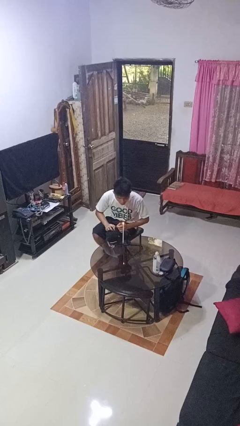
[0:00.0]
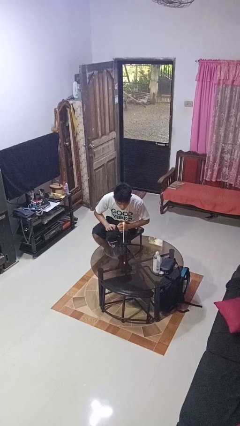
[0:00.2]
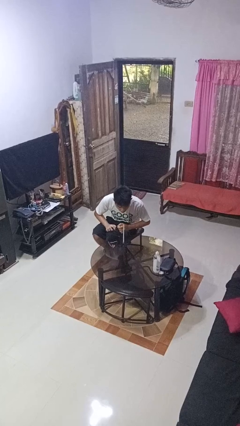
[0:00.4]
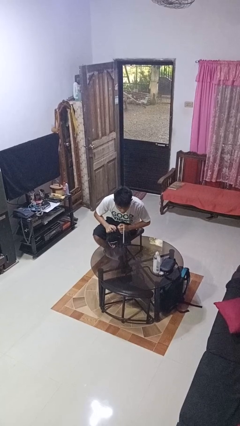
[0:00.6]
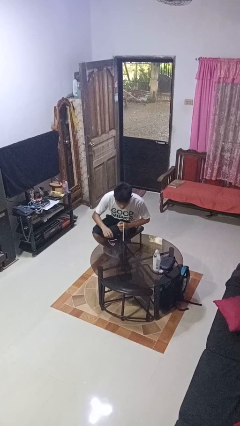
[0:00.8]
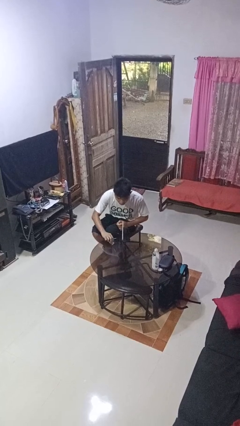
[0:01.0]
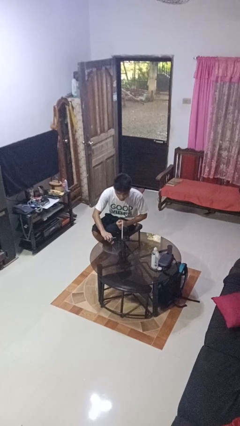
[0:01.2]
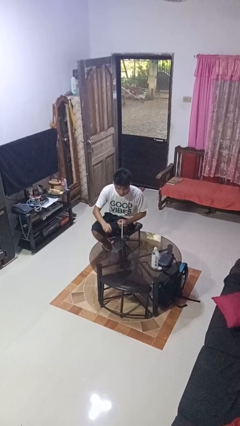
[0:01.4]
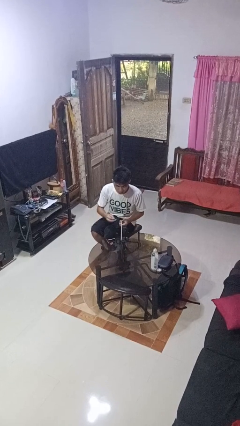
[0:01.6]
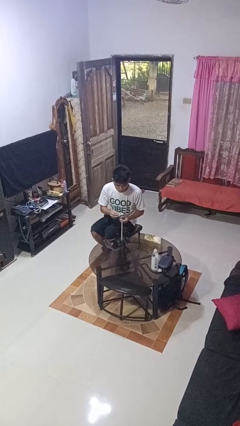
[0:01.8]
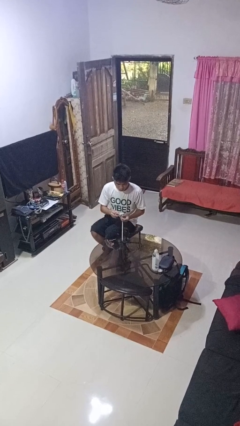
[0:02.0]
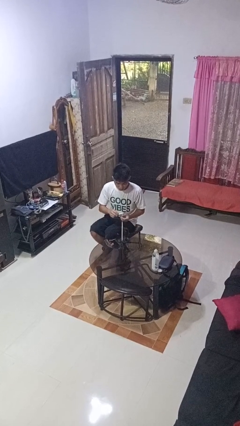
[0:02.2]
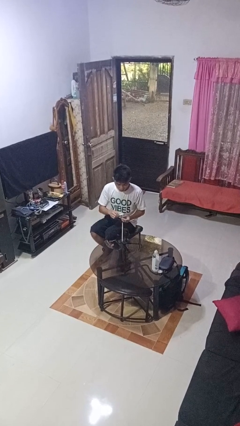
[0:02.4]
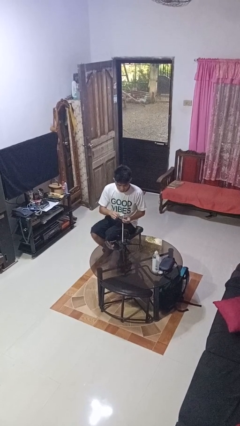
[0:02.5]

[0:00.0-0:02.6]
person extinguishes candle

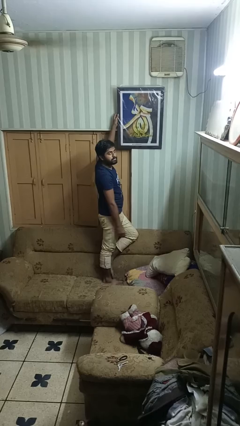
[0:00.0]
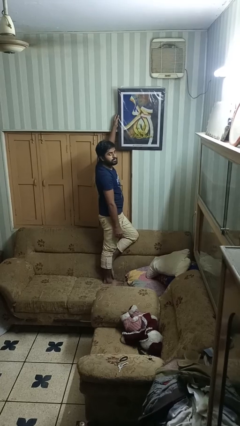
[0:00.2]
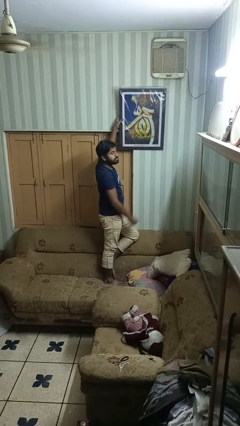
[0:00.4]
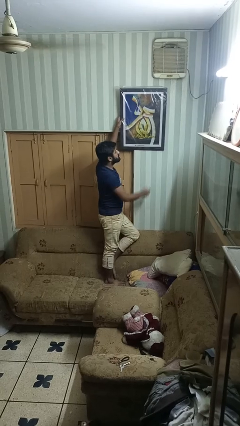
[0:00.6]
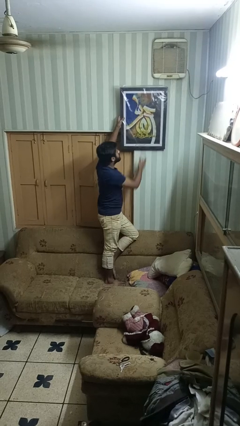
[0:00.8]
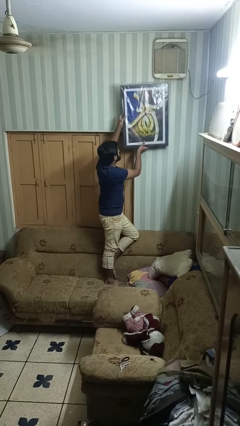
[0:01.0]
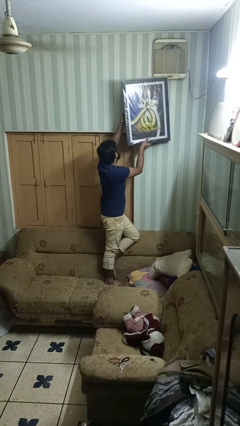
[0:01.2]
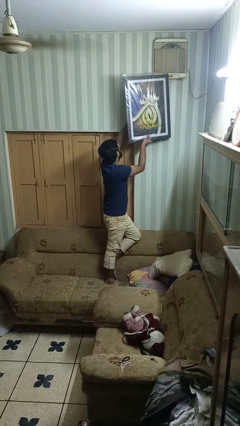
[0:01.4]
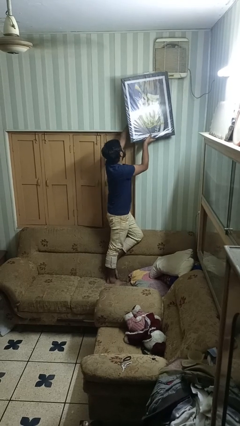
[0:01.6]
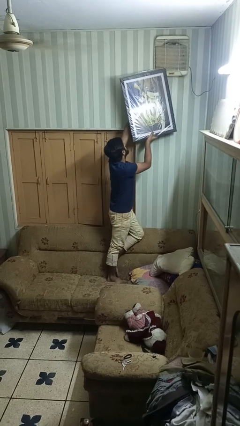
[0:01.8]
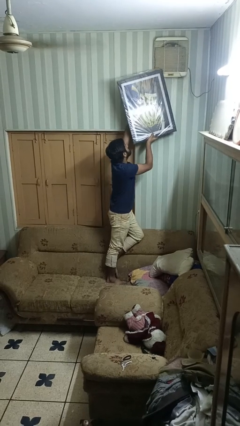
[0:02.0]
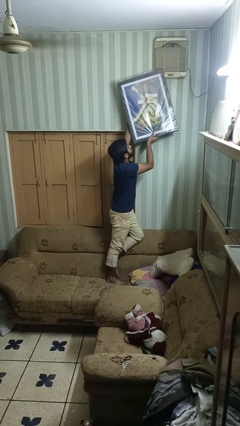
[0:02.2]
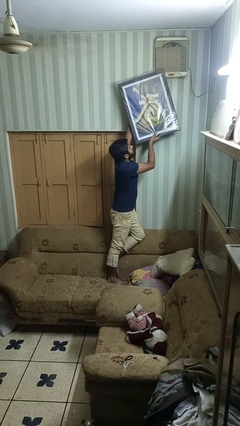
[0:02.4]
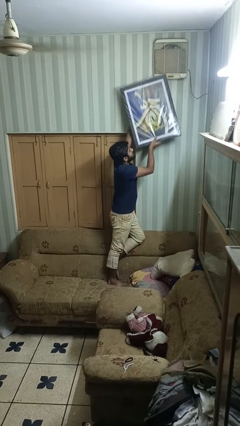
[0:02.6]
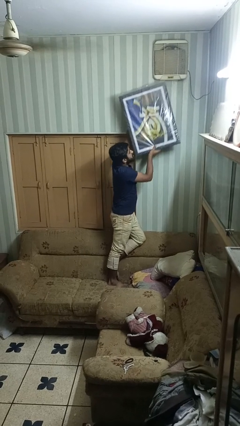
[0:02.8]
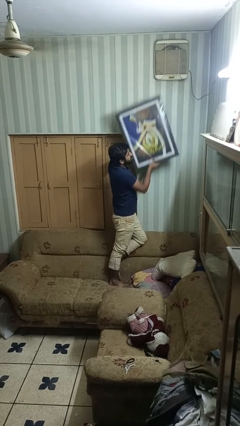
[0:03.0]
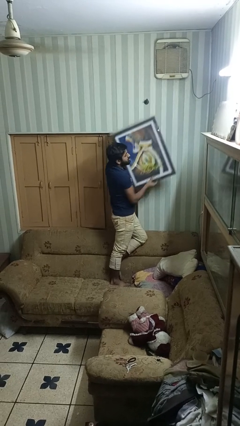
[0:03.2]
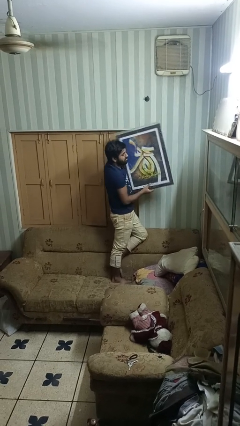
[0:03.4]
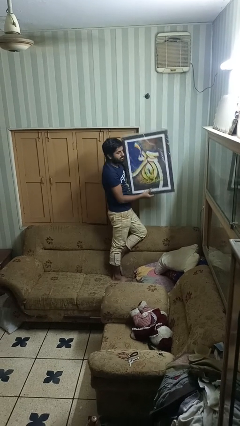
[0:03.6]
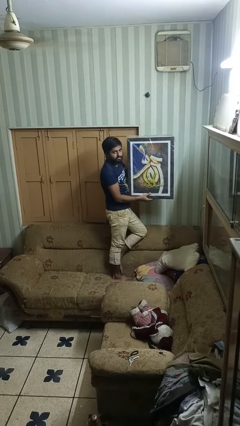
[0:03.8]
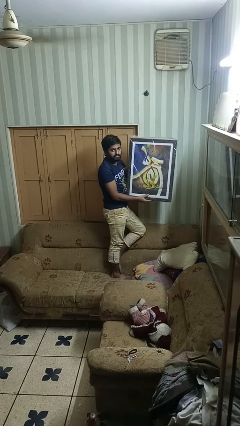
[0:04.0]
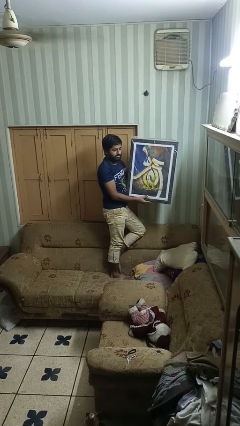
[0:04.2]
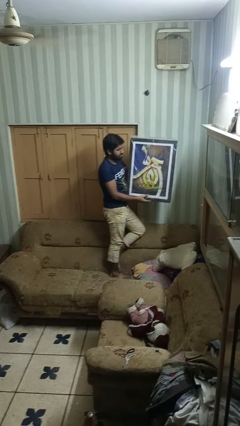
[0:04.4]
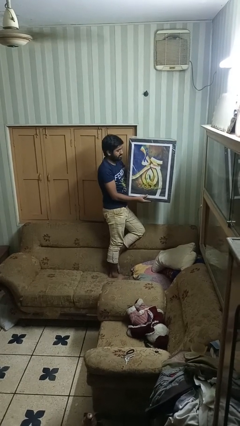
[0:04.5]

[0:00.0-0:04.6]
person takes down picture frame

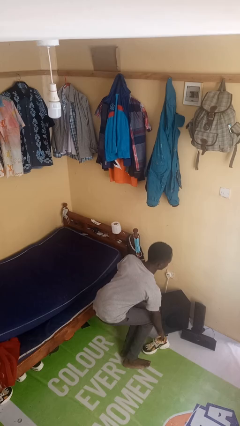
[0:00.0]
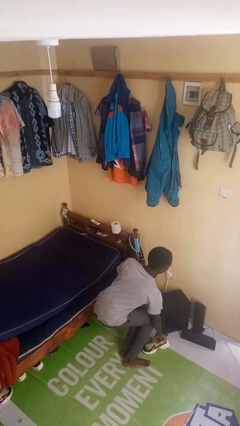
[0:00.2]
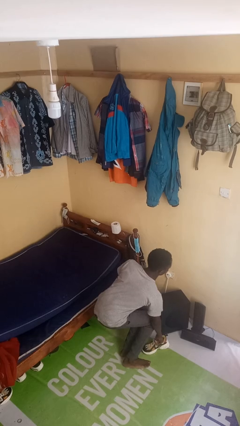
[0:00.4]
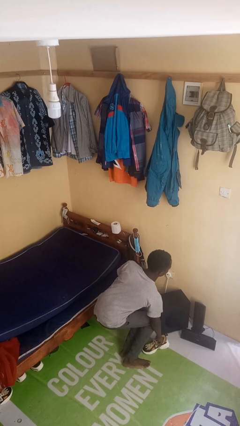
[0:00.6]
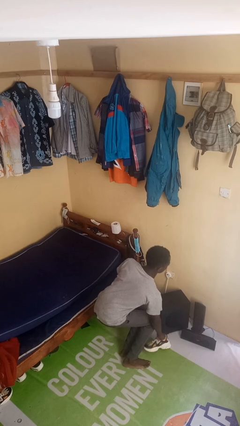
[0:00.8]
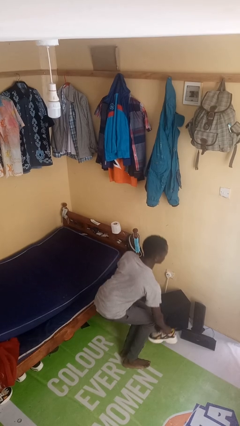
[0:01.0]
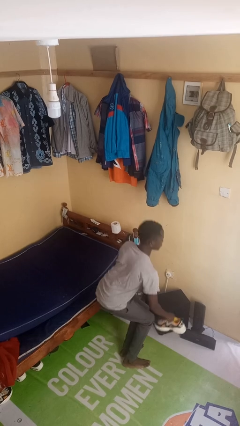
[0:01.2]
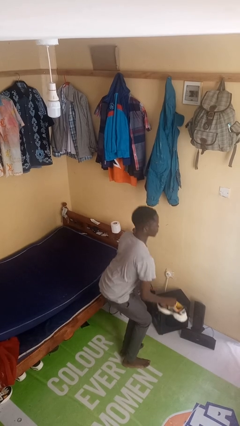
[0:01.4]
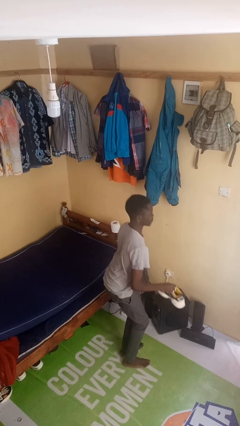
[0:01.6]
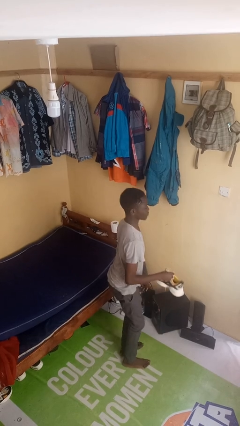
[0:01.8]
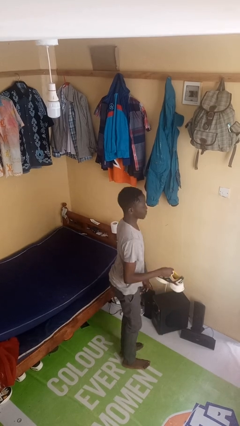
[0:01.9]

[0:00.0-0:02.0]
person picks up object from floor

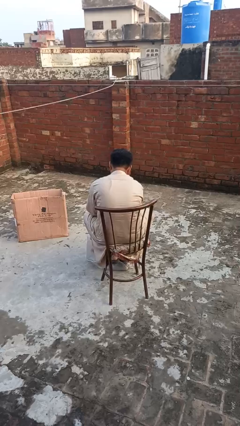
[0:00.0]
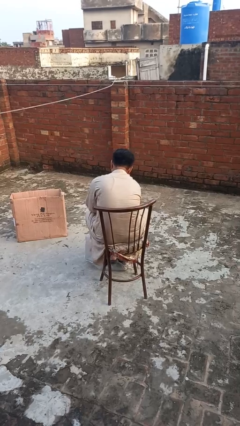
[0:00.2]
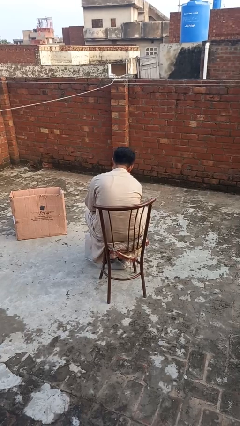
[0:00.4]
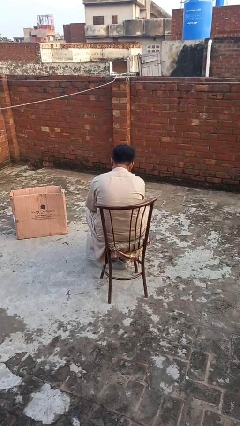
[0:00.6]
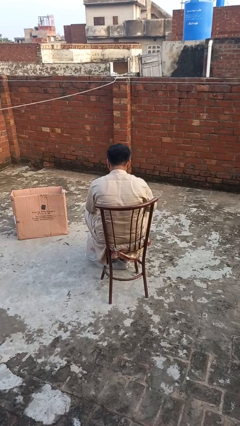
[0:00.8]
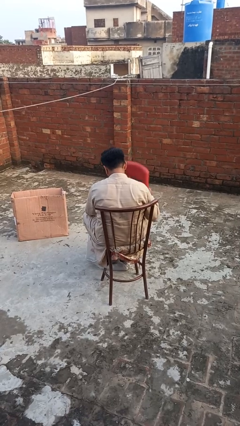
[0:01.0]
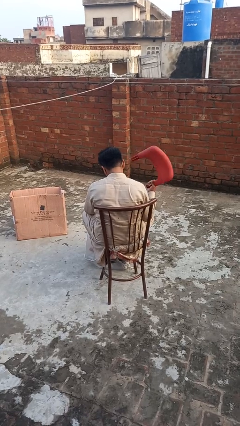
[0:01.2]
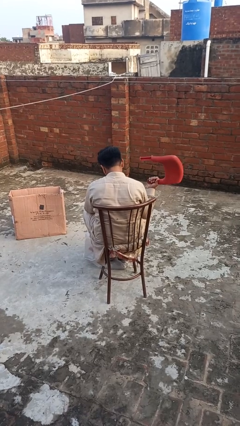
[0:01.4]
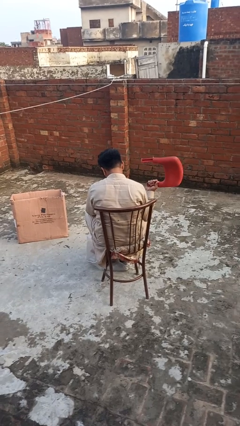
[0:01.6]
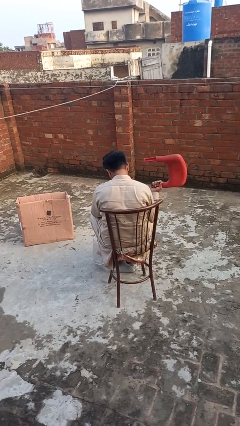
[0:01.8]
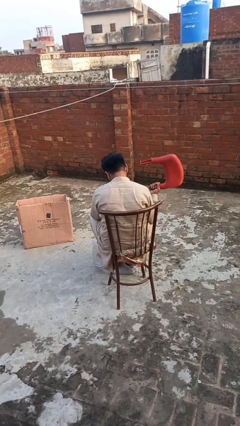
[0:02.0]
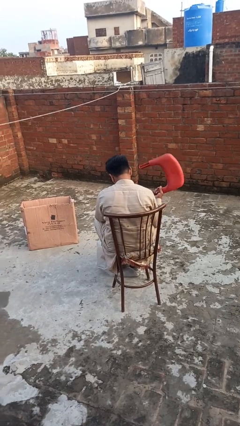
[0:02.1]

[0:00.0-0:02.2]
person searches in bag

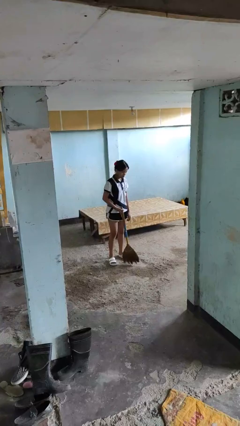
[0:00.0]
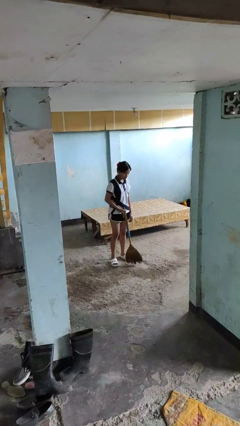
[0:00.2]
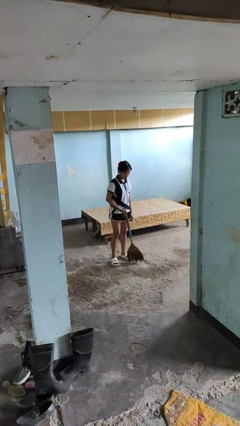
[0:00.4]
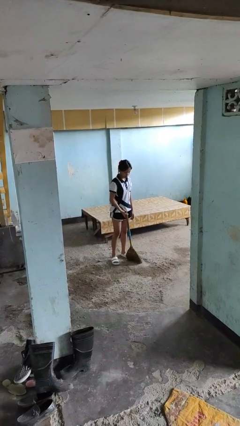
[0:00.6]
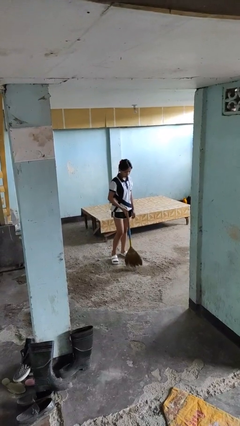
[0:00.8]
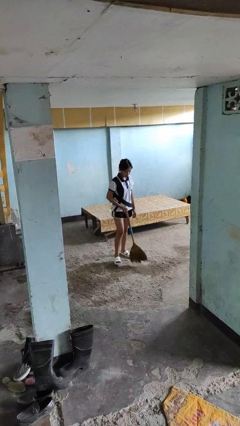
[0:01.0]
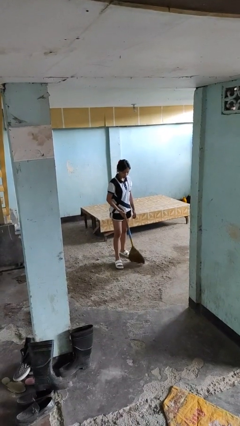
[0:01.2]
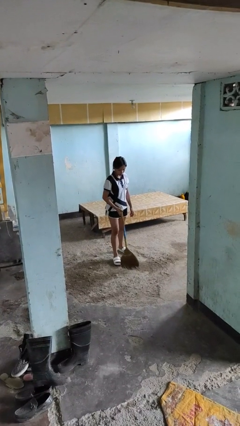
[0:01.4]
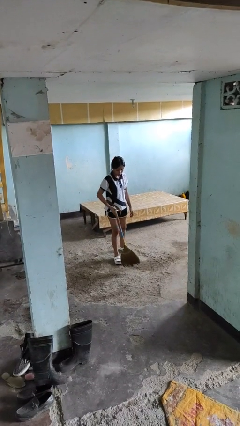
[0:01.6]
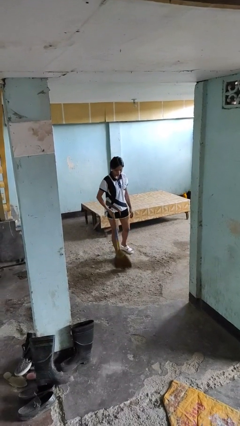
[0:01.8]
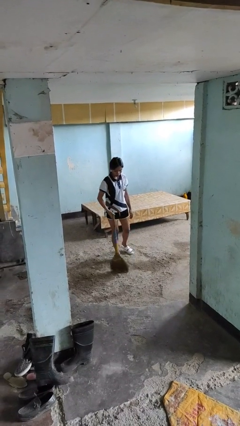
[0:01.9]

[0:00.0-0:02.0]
person sweeps floor

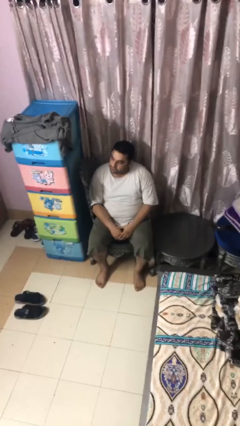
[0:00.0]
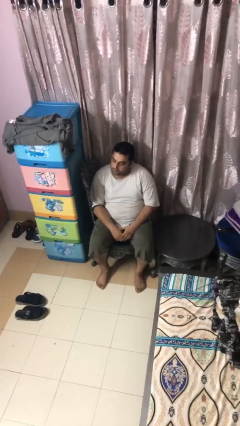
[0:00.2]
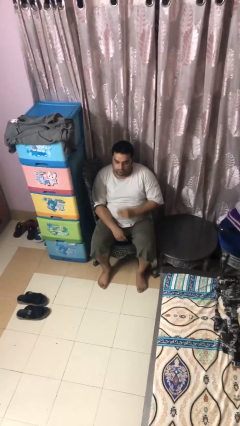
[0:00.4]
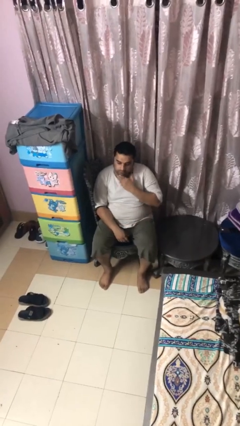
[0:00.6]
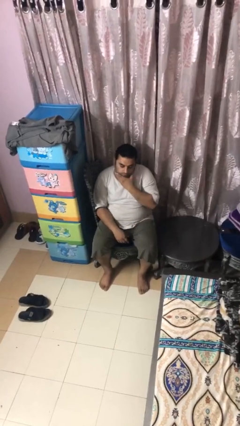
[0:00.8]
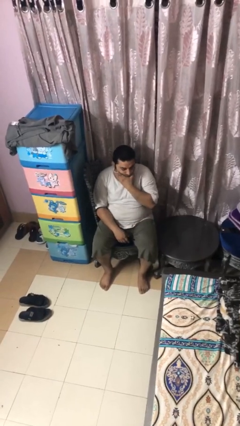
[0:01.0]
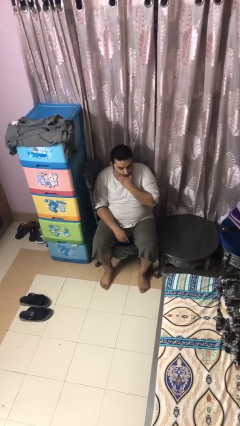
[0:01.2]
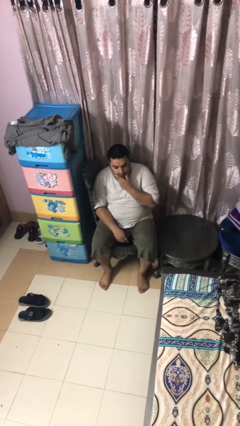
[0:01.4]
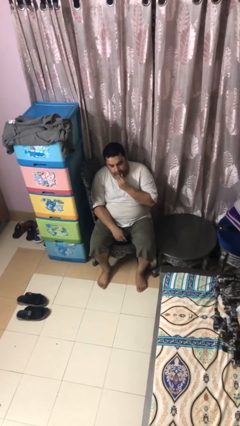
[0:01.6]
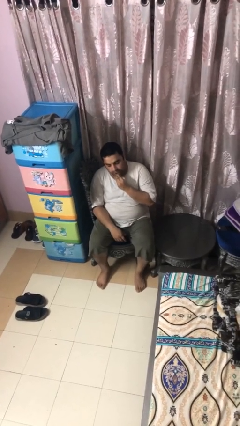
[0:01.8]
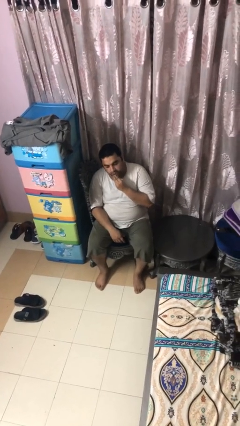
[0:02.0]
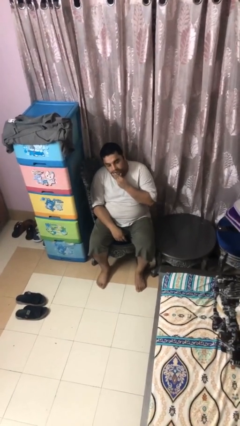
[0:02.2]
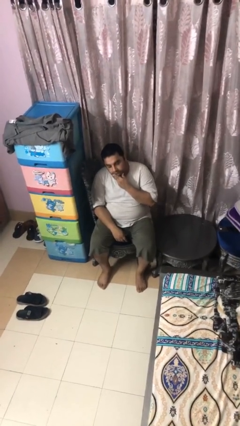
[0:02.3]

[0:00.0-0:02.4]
person strokes chin

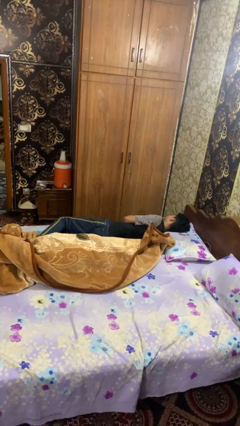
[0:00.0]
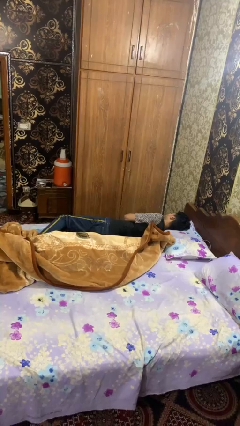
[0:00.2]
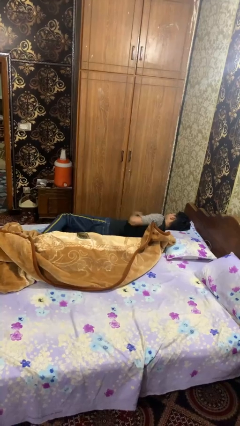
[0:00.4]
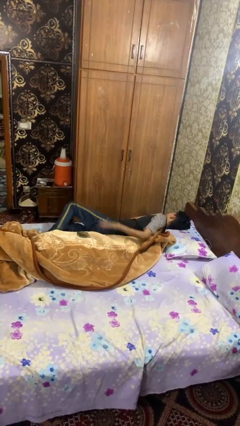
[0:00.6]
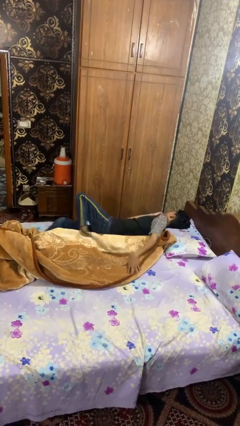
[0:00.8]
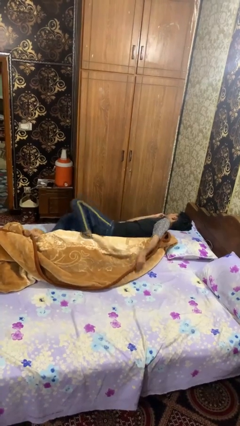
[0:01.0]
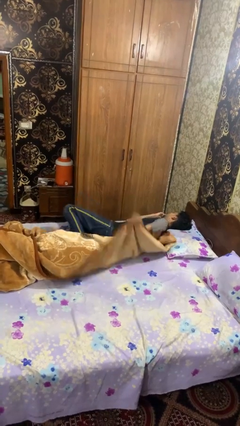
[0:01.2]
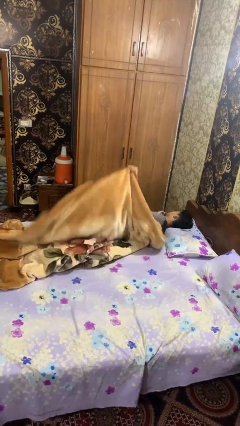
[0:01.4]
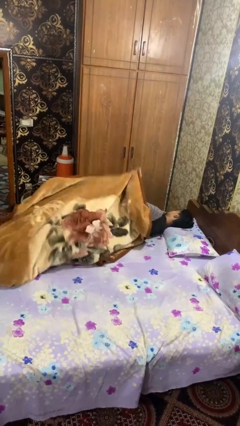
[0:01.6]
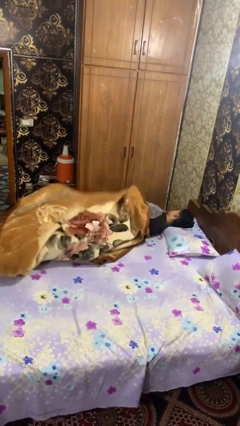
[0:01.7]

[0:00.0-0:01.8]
person covers with blanket
